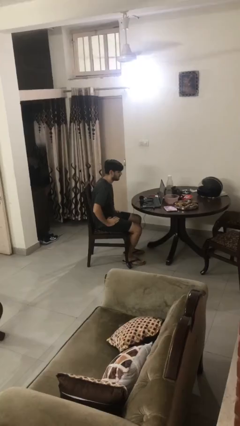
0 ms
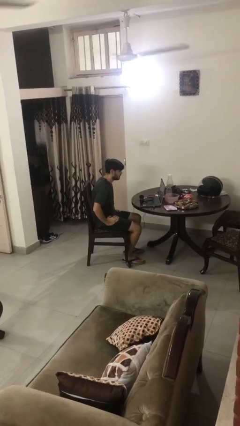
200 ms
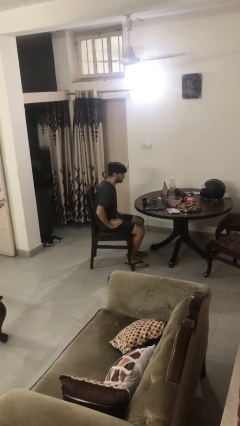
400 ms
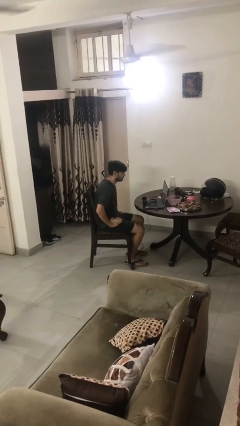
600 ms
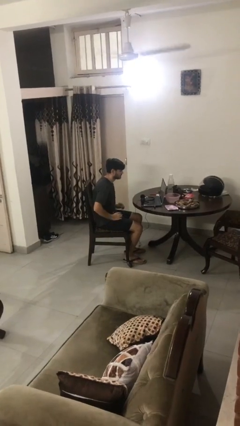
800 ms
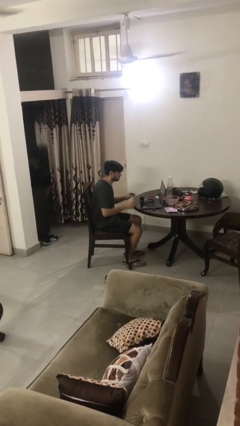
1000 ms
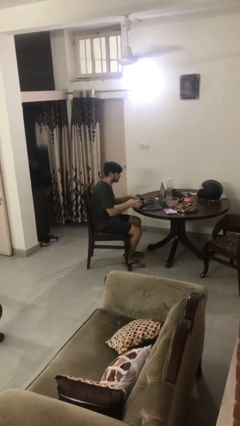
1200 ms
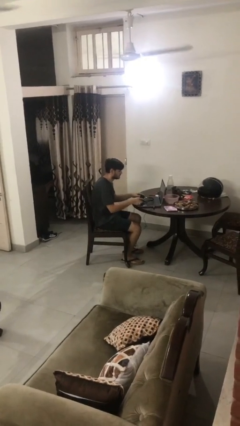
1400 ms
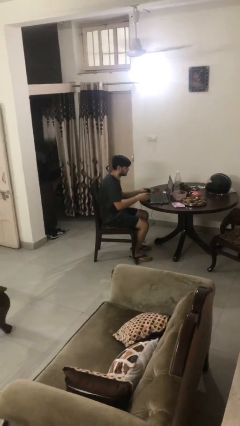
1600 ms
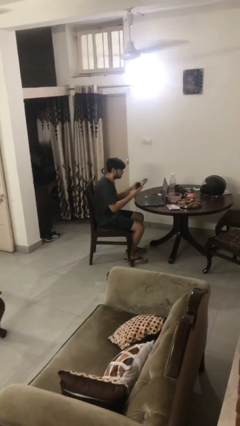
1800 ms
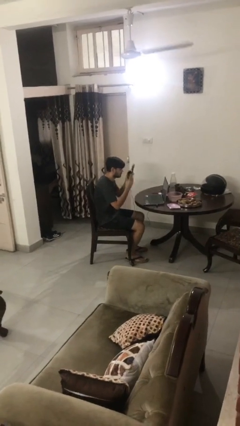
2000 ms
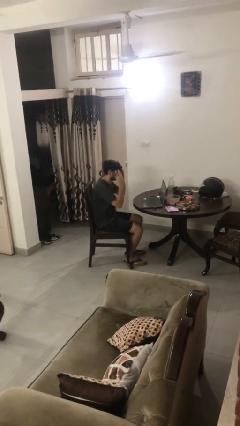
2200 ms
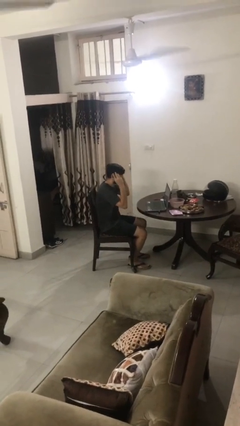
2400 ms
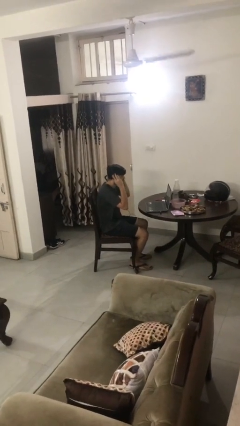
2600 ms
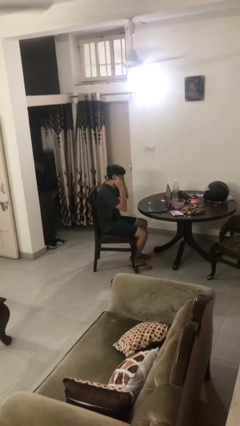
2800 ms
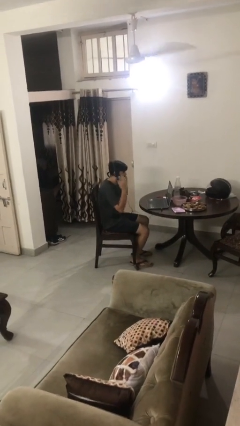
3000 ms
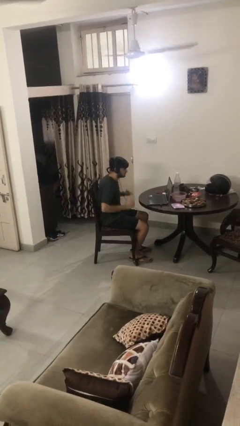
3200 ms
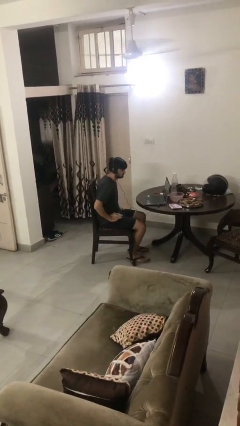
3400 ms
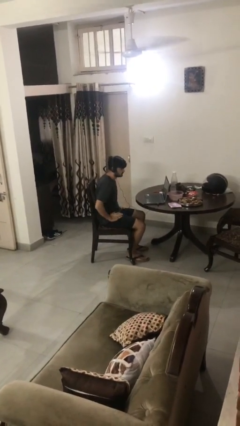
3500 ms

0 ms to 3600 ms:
person puts on headphones

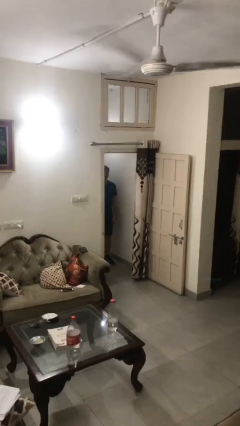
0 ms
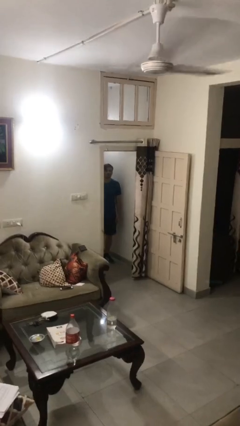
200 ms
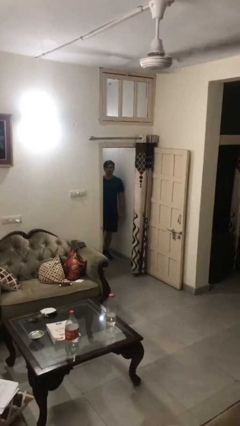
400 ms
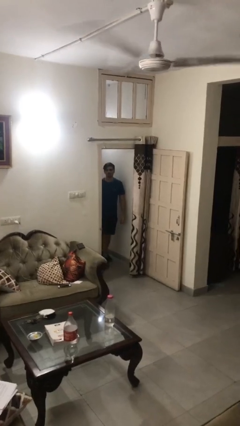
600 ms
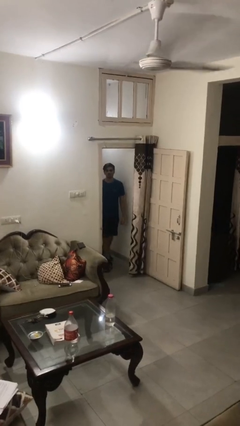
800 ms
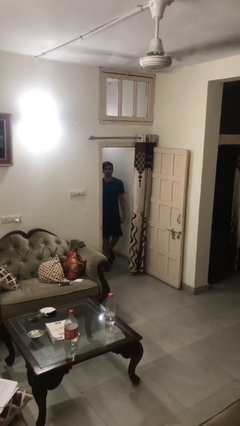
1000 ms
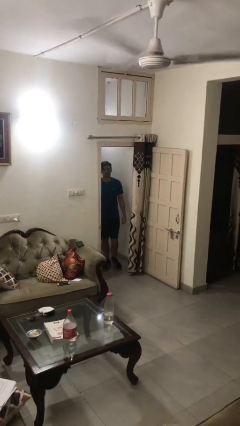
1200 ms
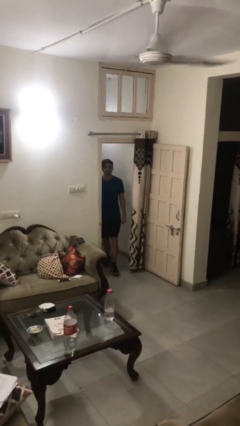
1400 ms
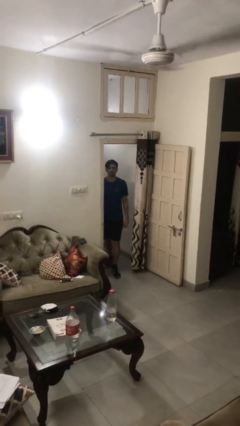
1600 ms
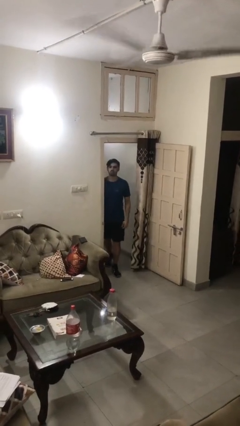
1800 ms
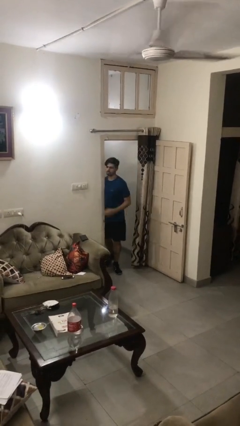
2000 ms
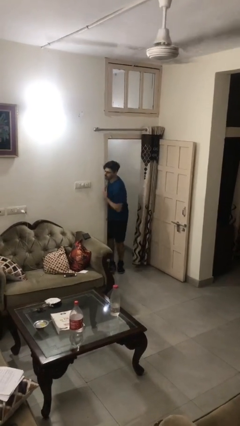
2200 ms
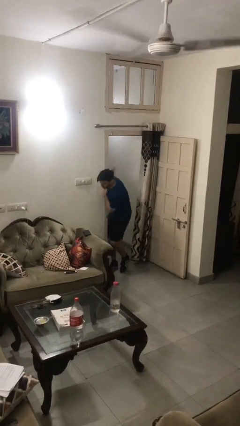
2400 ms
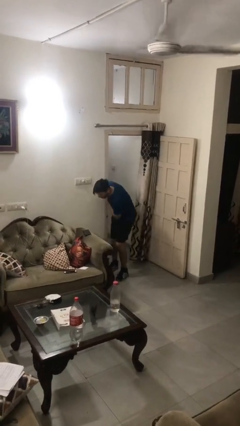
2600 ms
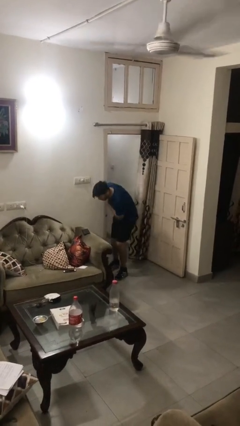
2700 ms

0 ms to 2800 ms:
person bumps into wall

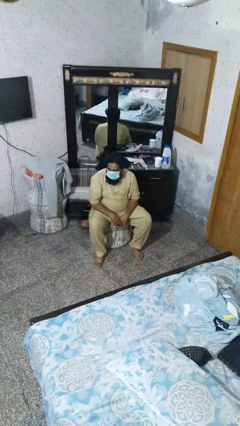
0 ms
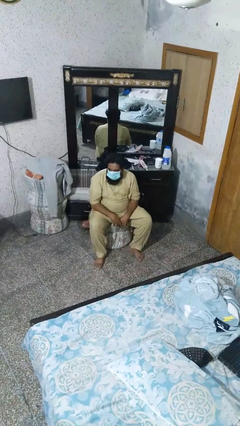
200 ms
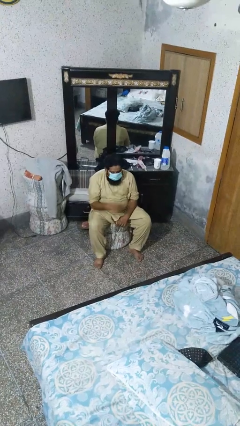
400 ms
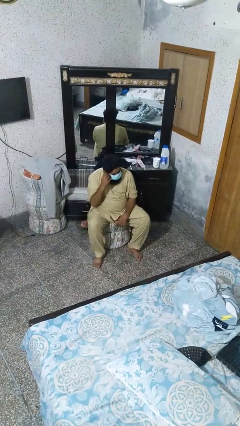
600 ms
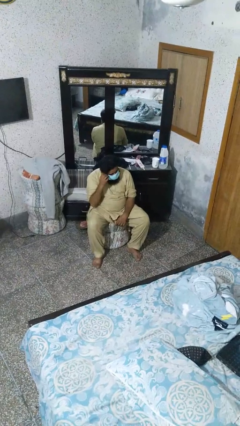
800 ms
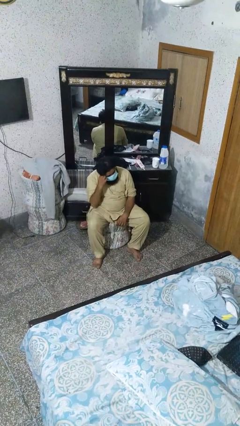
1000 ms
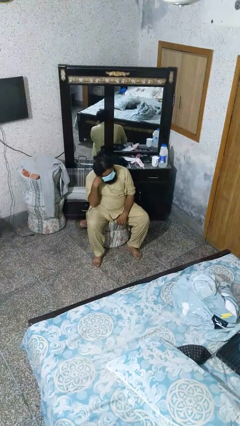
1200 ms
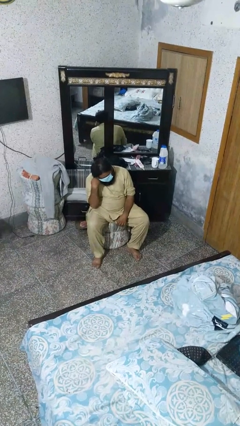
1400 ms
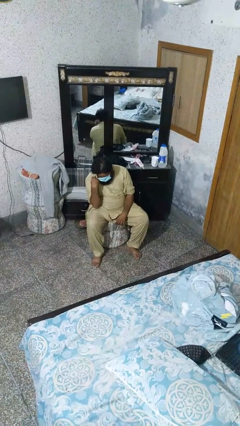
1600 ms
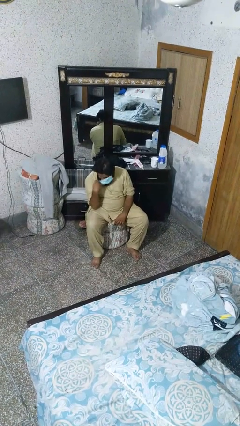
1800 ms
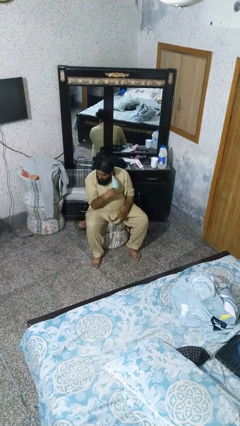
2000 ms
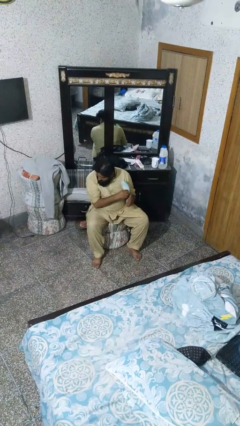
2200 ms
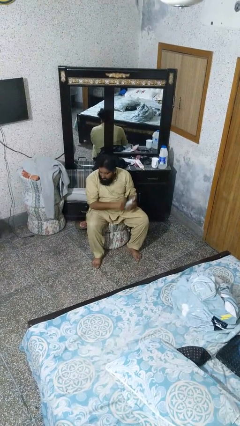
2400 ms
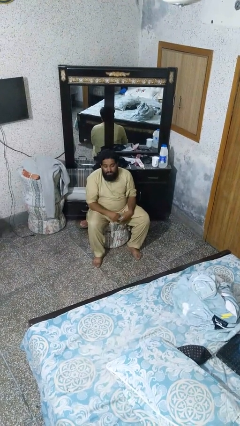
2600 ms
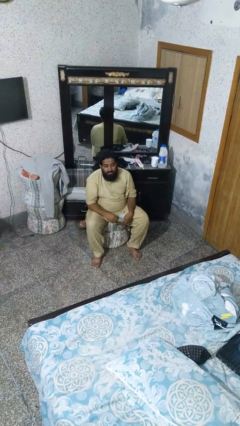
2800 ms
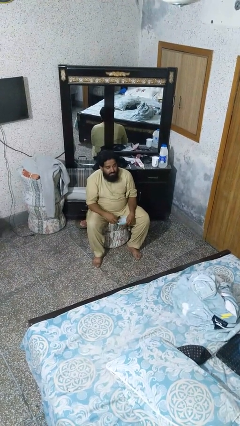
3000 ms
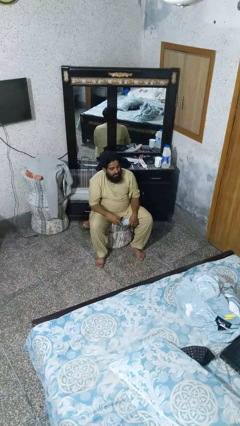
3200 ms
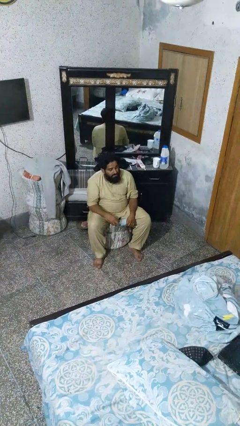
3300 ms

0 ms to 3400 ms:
person takes off facemask

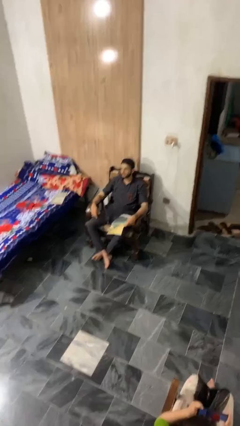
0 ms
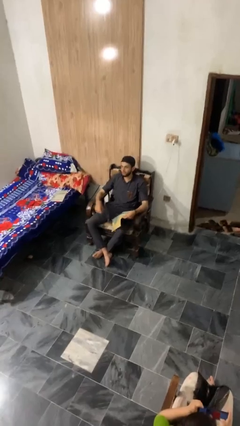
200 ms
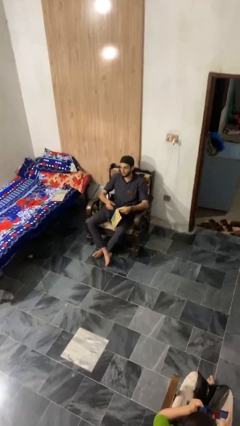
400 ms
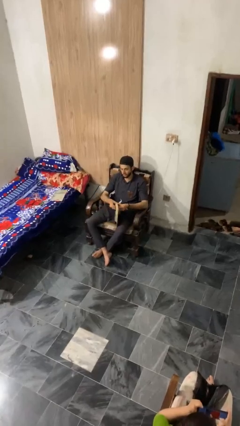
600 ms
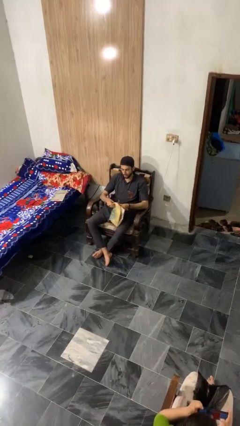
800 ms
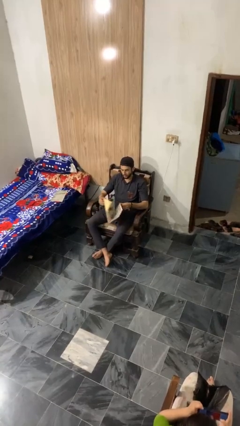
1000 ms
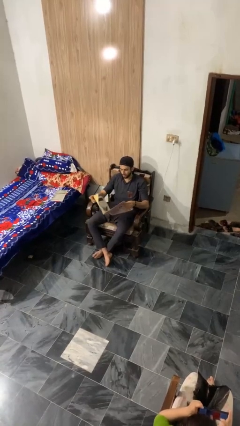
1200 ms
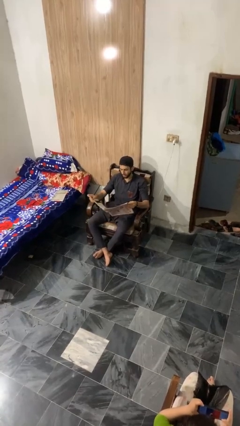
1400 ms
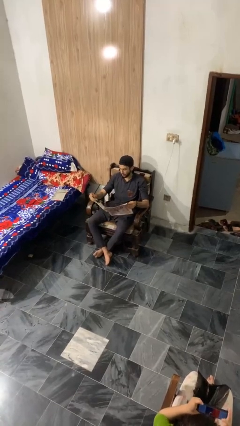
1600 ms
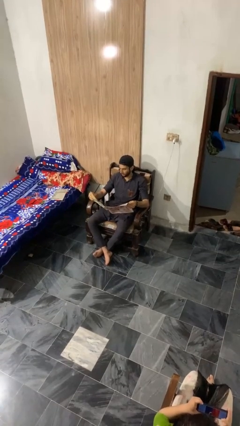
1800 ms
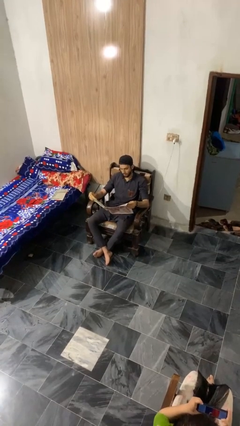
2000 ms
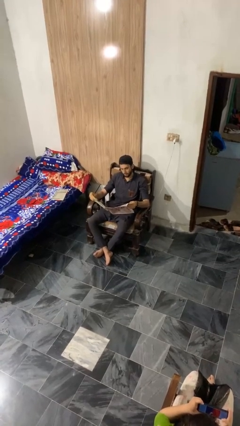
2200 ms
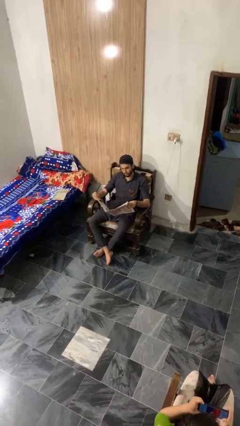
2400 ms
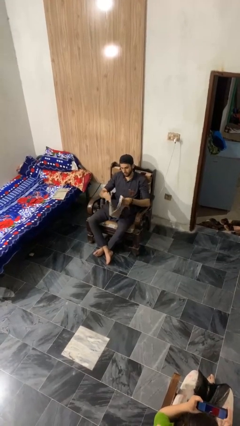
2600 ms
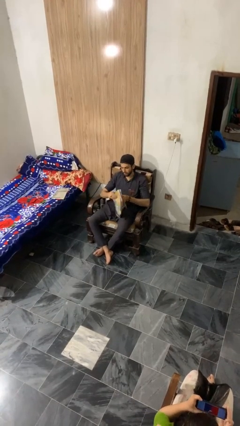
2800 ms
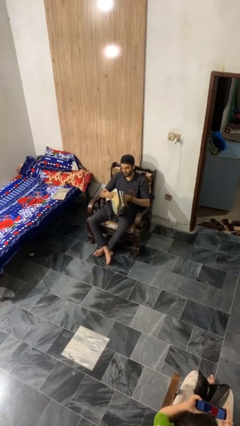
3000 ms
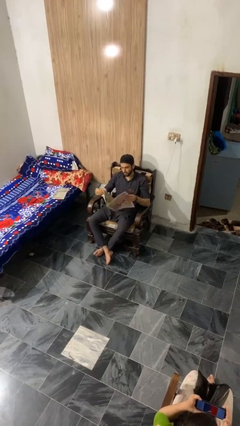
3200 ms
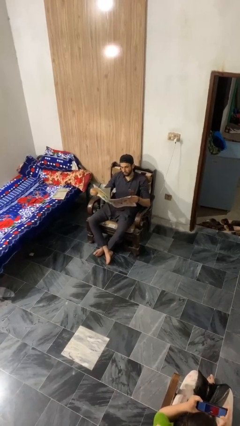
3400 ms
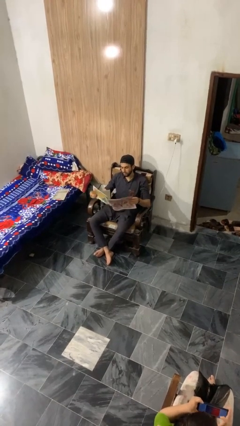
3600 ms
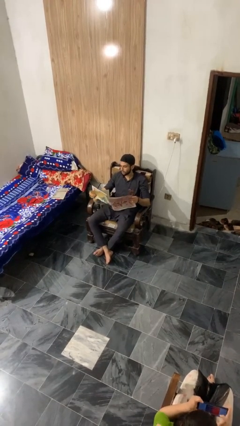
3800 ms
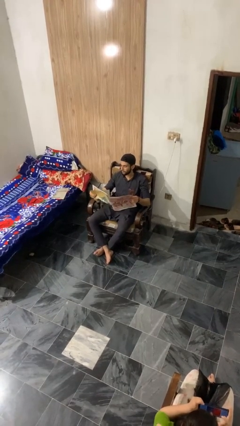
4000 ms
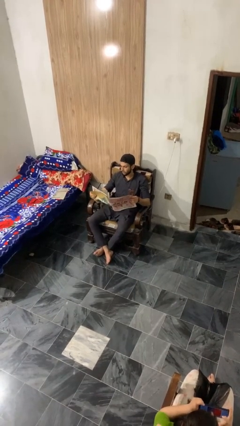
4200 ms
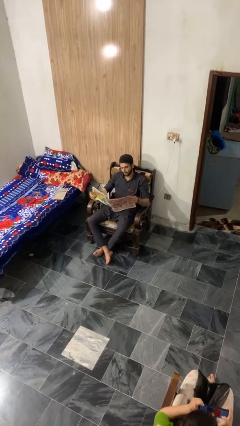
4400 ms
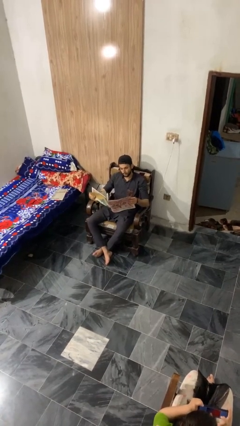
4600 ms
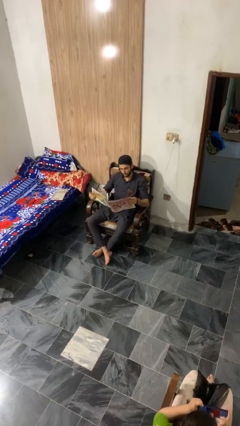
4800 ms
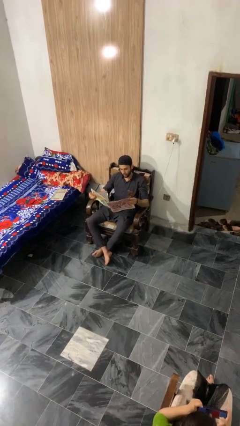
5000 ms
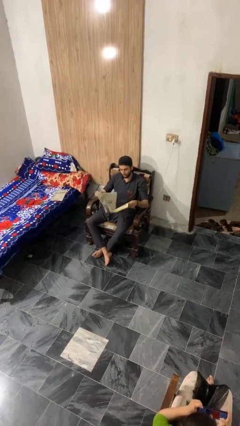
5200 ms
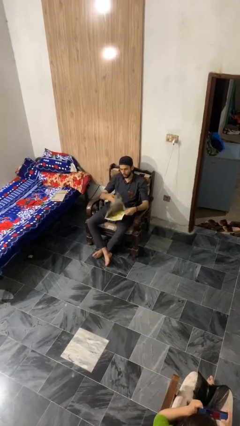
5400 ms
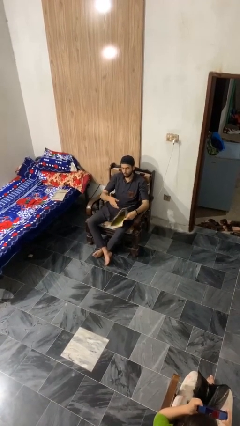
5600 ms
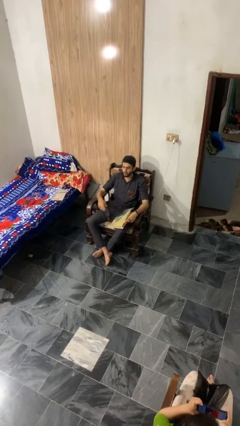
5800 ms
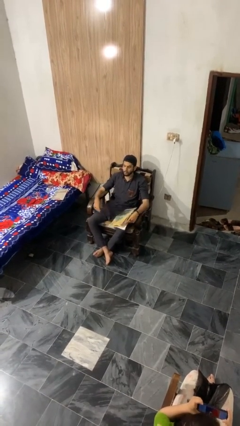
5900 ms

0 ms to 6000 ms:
person reads magazine

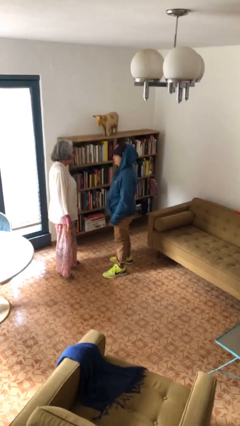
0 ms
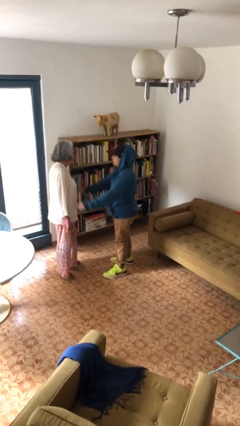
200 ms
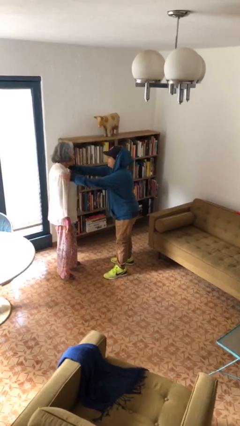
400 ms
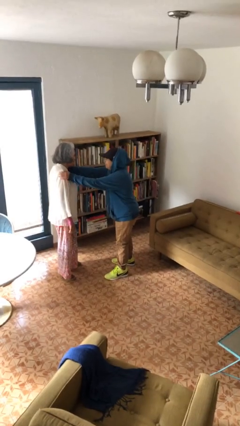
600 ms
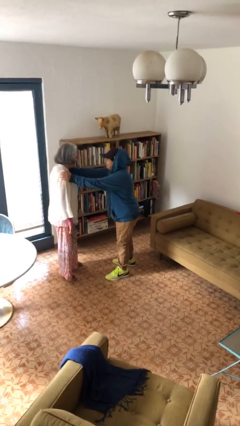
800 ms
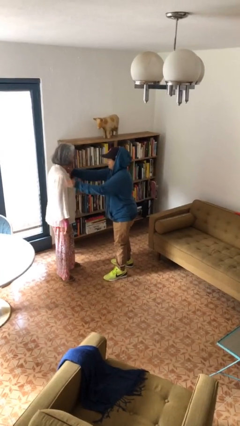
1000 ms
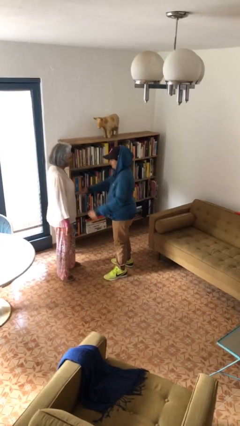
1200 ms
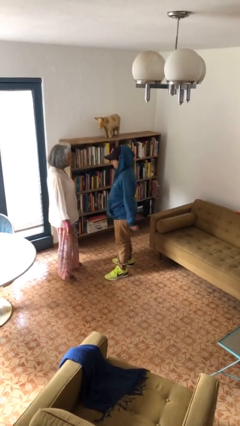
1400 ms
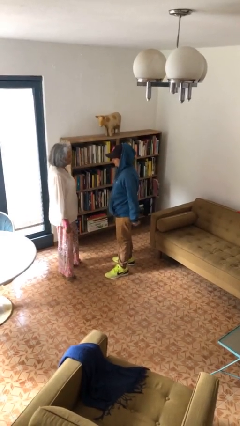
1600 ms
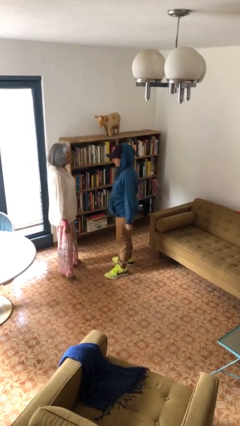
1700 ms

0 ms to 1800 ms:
person pounds shoulders of person
